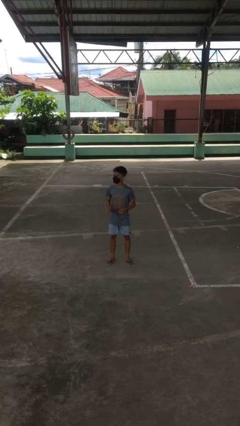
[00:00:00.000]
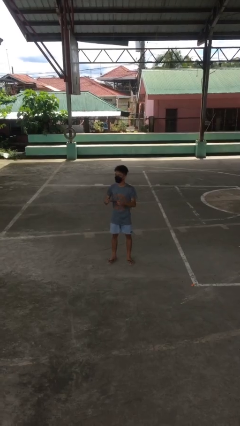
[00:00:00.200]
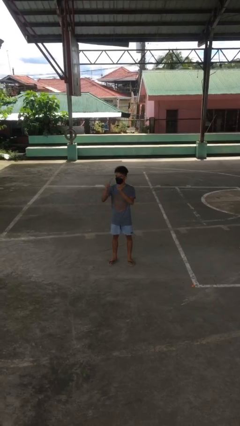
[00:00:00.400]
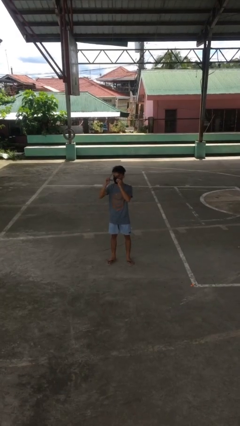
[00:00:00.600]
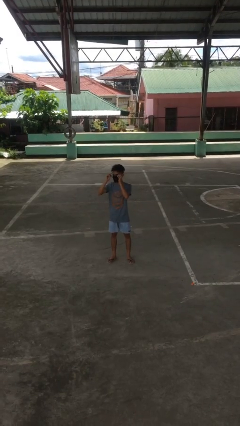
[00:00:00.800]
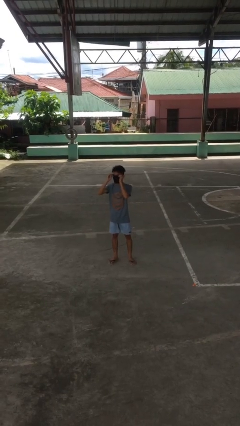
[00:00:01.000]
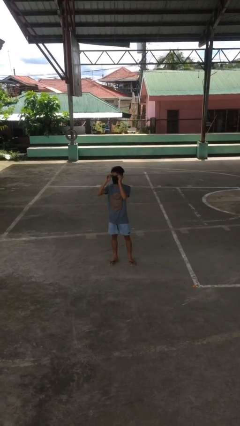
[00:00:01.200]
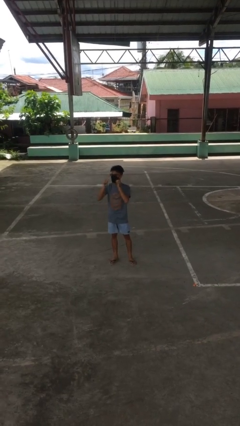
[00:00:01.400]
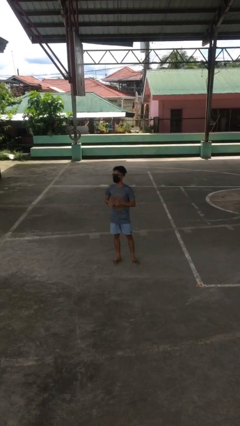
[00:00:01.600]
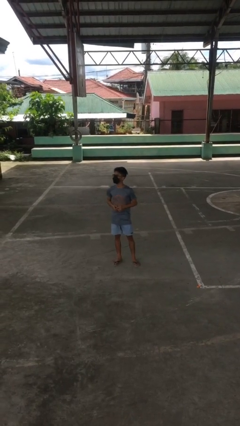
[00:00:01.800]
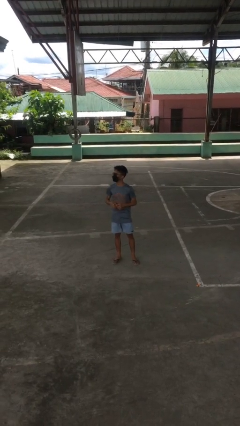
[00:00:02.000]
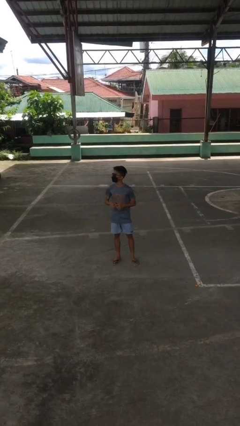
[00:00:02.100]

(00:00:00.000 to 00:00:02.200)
person puts on glasses

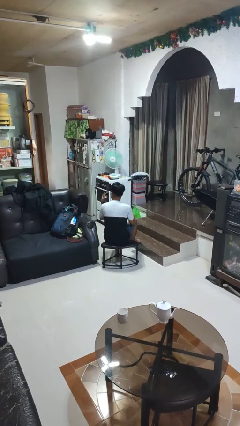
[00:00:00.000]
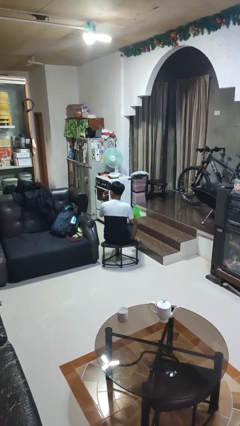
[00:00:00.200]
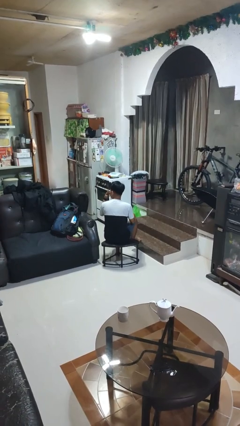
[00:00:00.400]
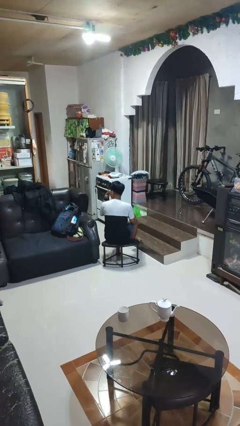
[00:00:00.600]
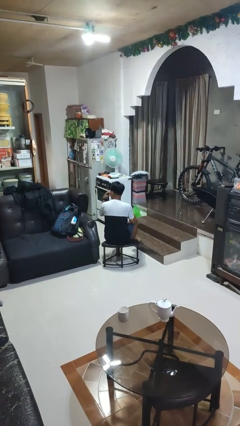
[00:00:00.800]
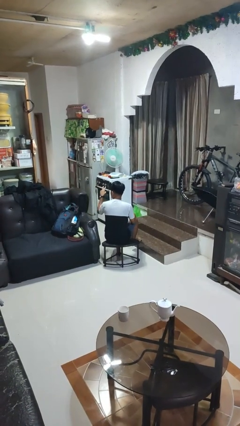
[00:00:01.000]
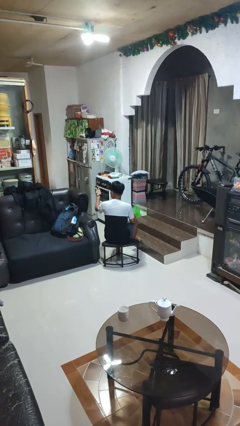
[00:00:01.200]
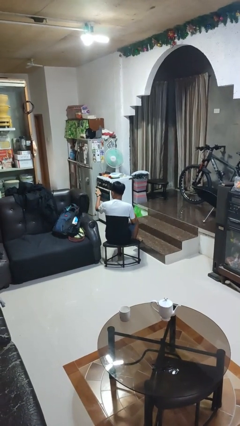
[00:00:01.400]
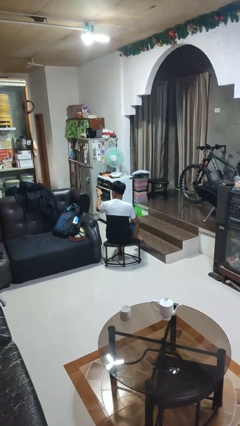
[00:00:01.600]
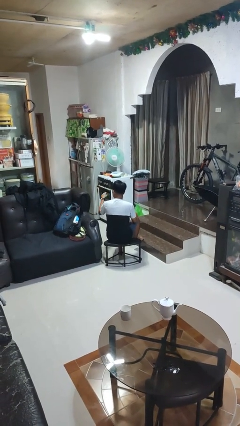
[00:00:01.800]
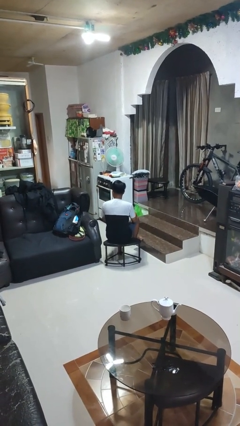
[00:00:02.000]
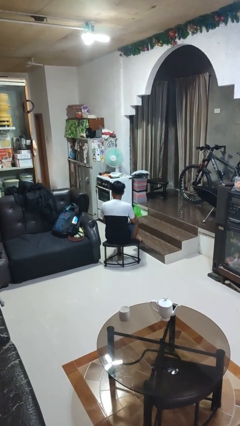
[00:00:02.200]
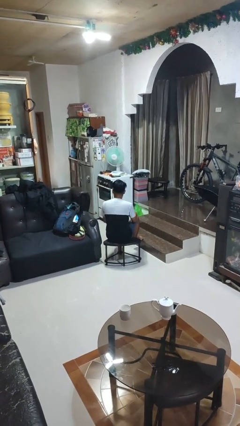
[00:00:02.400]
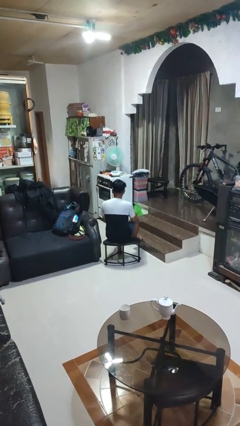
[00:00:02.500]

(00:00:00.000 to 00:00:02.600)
person gestures watch closely

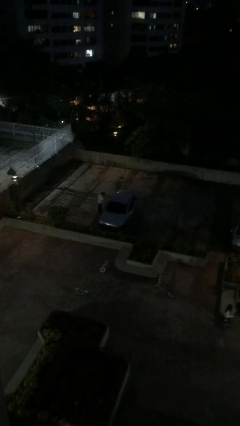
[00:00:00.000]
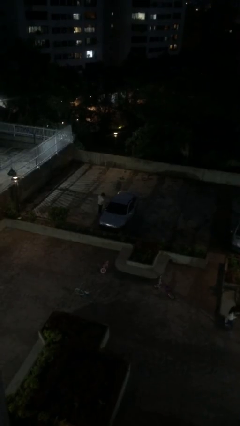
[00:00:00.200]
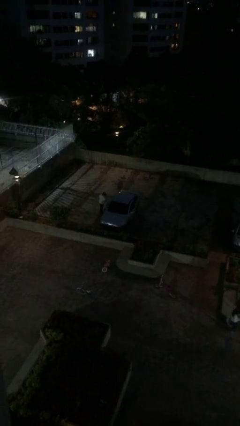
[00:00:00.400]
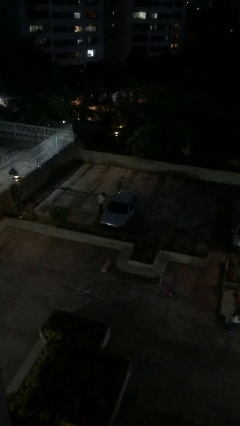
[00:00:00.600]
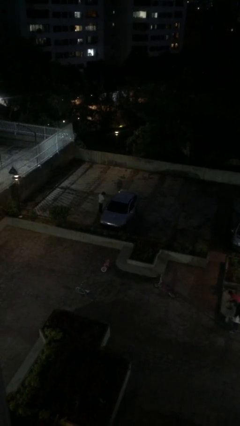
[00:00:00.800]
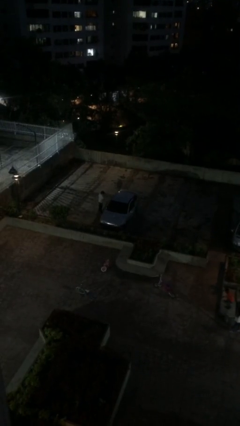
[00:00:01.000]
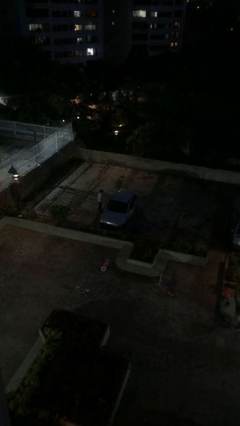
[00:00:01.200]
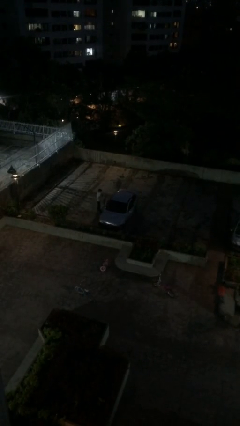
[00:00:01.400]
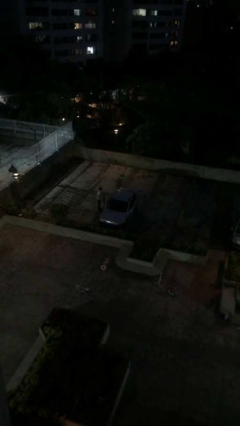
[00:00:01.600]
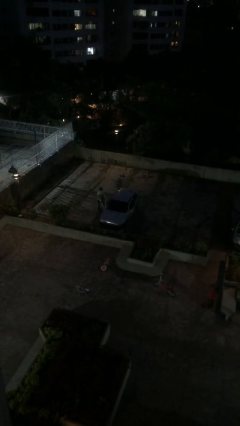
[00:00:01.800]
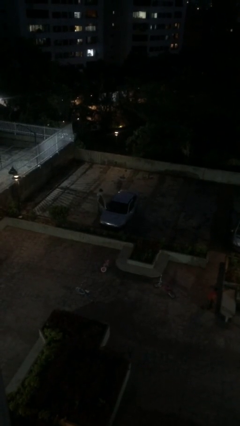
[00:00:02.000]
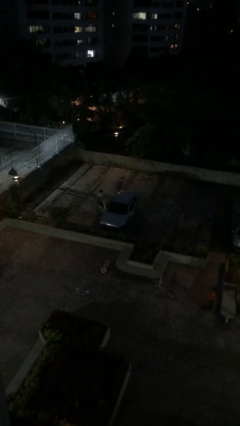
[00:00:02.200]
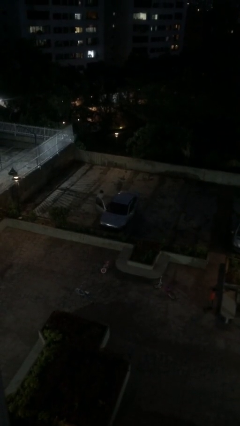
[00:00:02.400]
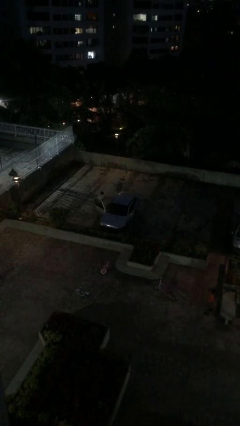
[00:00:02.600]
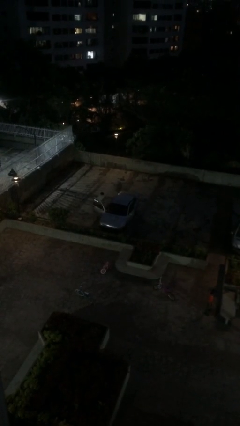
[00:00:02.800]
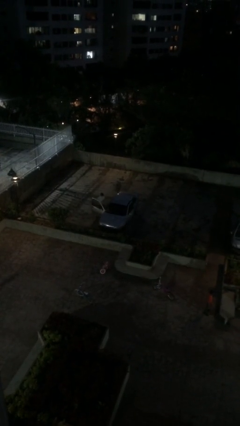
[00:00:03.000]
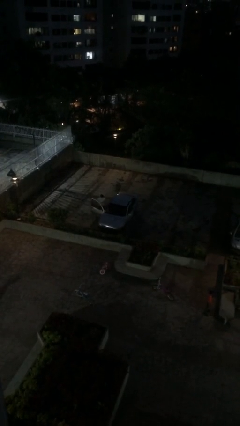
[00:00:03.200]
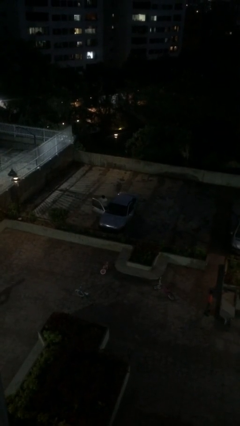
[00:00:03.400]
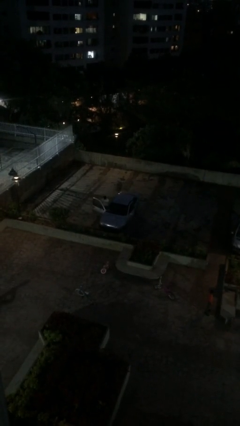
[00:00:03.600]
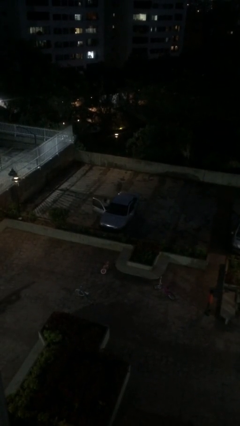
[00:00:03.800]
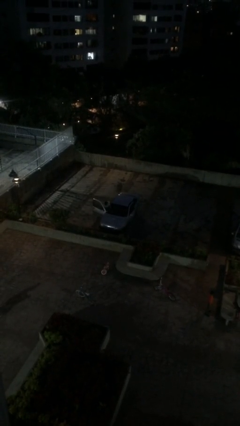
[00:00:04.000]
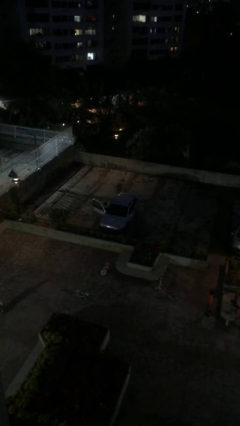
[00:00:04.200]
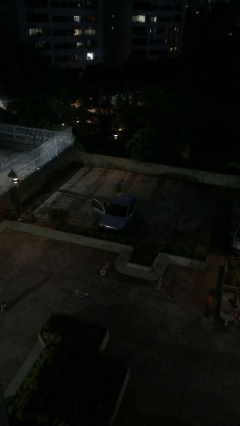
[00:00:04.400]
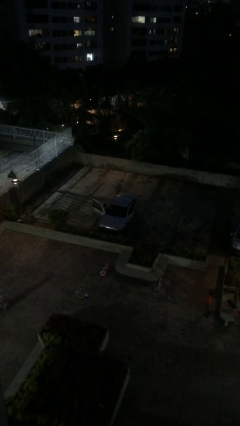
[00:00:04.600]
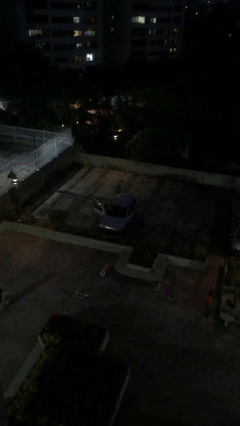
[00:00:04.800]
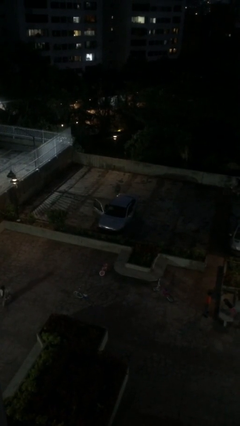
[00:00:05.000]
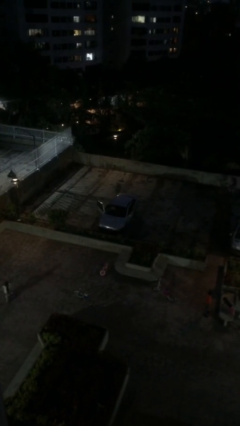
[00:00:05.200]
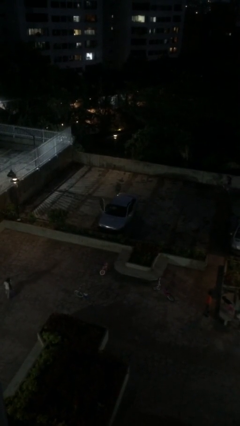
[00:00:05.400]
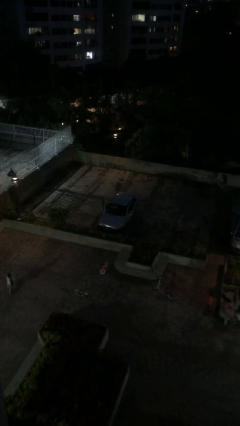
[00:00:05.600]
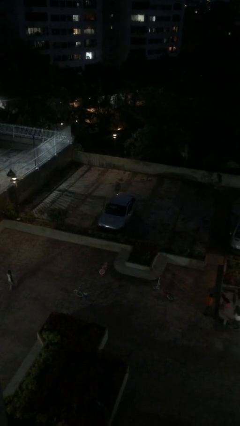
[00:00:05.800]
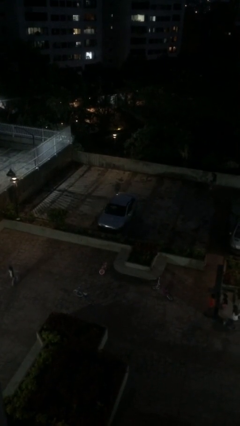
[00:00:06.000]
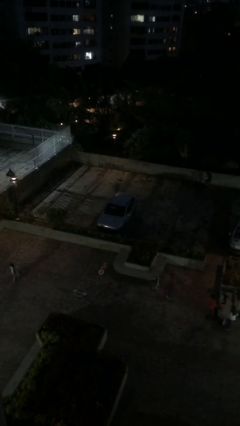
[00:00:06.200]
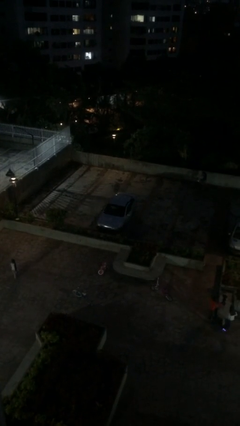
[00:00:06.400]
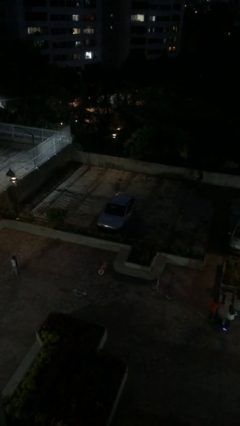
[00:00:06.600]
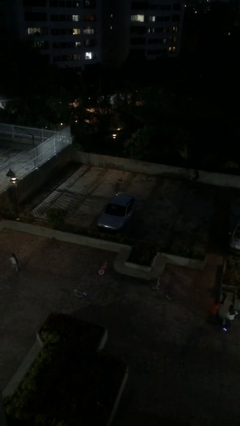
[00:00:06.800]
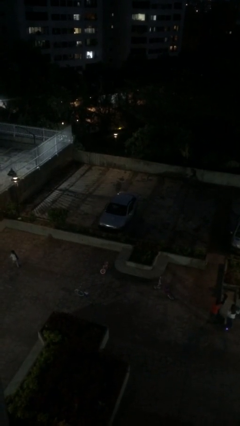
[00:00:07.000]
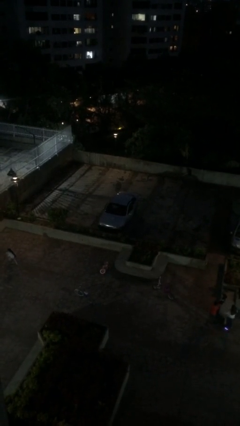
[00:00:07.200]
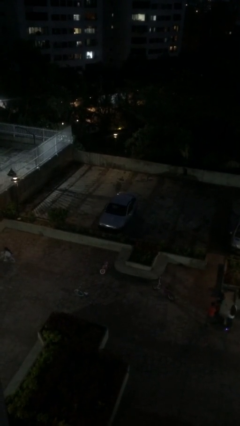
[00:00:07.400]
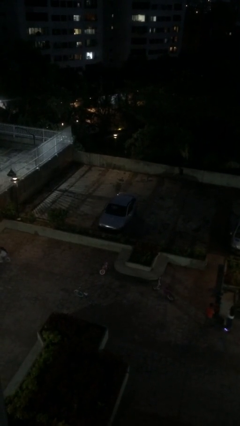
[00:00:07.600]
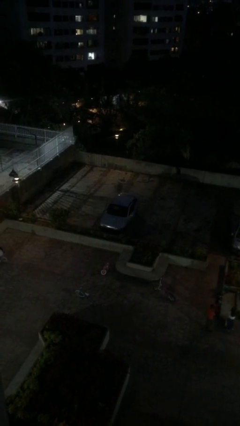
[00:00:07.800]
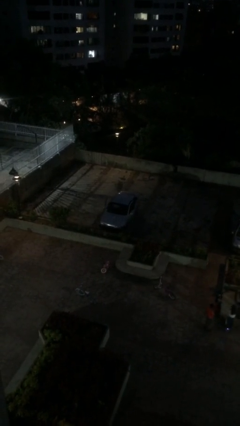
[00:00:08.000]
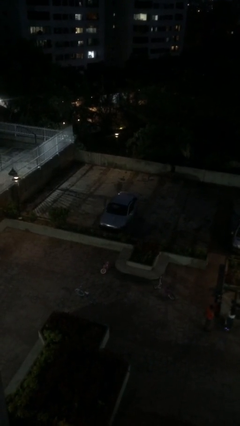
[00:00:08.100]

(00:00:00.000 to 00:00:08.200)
car picks up person

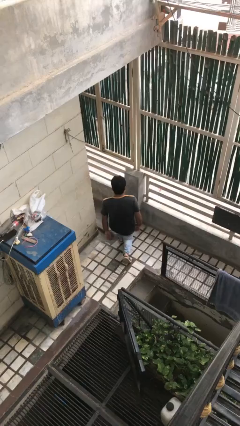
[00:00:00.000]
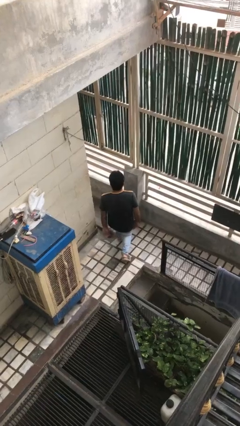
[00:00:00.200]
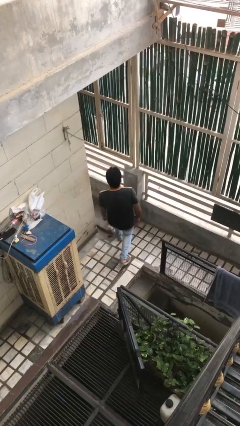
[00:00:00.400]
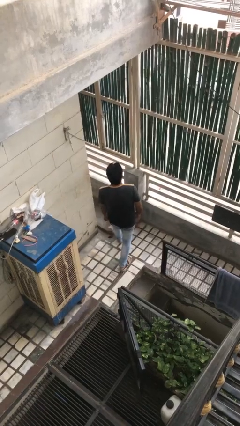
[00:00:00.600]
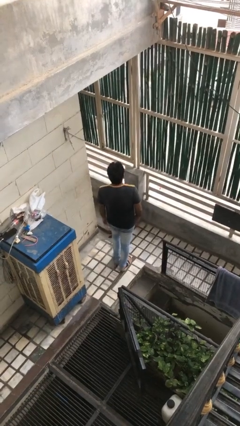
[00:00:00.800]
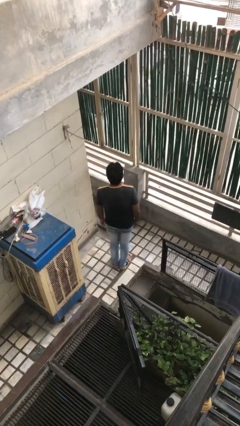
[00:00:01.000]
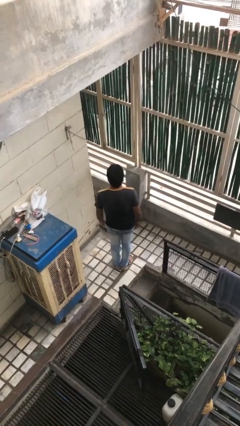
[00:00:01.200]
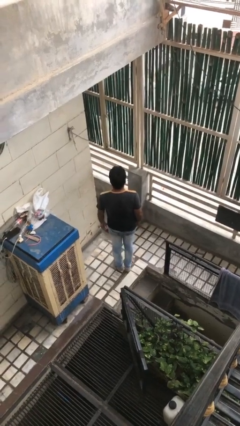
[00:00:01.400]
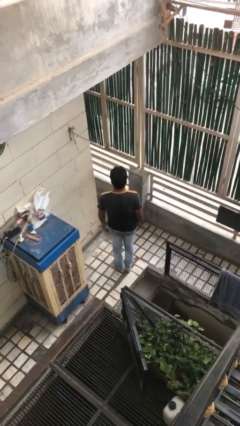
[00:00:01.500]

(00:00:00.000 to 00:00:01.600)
person stands up from floor

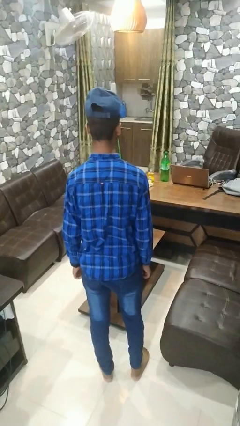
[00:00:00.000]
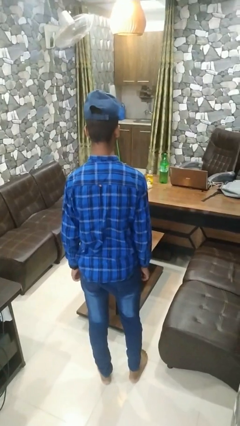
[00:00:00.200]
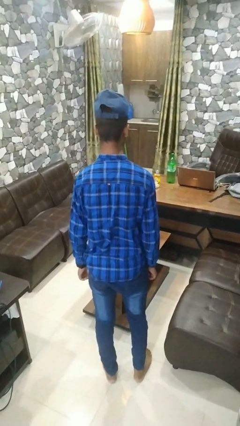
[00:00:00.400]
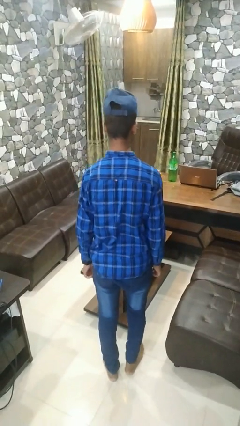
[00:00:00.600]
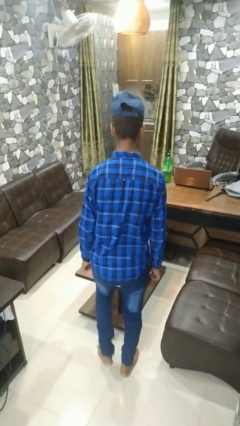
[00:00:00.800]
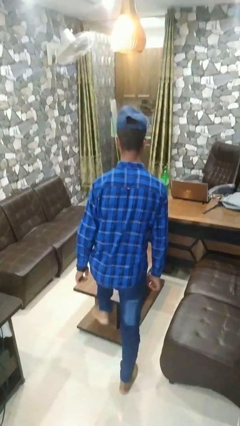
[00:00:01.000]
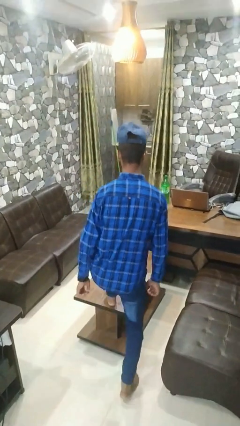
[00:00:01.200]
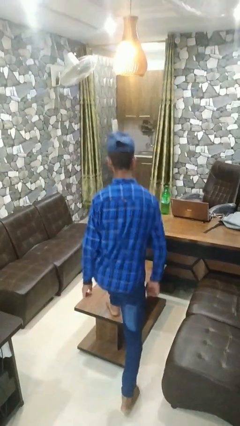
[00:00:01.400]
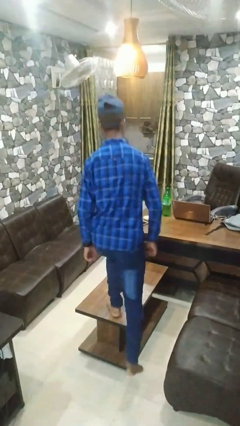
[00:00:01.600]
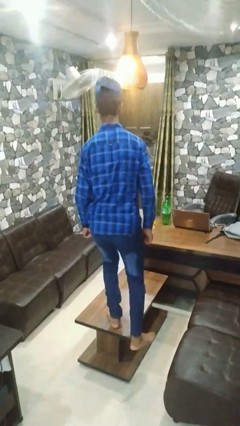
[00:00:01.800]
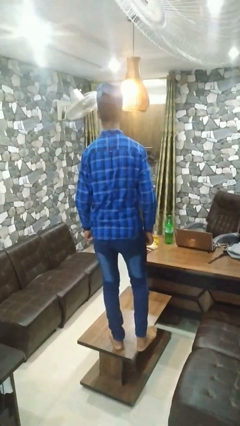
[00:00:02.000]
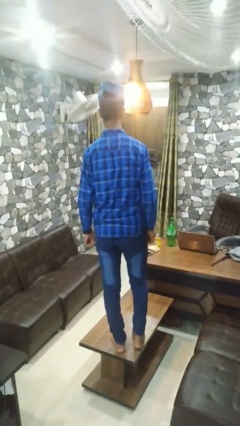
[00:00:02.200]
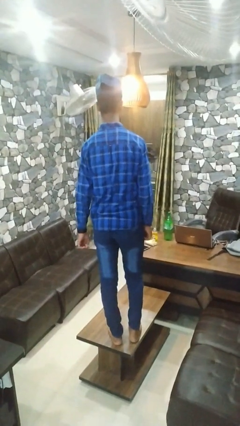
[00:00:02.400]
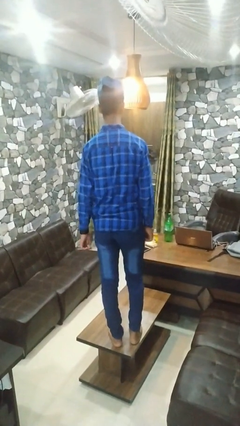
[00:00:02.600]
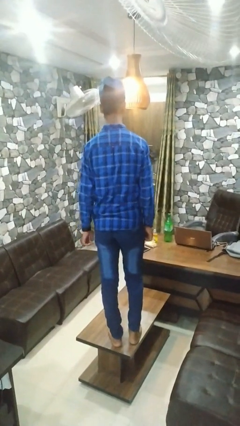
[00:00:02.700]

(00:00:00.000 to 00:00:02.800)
person climbs on table
